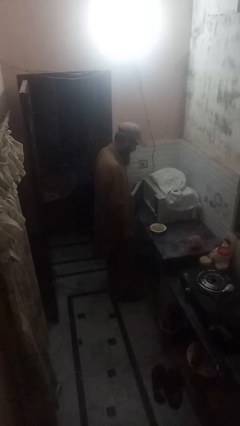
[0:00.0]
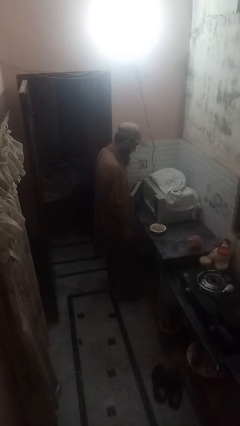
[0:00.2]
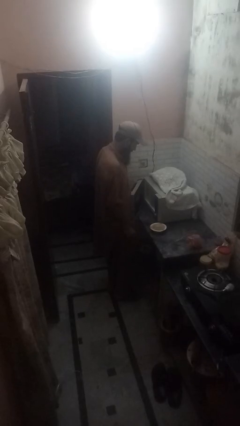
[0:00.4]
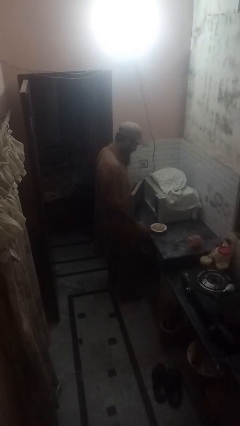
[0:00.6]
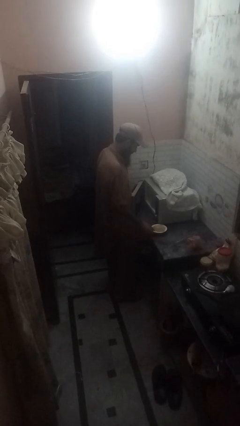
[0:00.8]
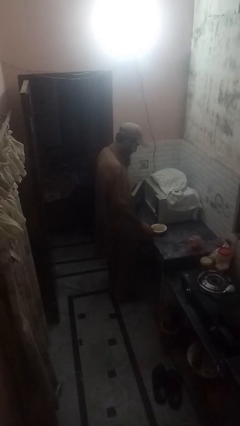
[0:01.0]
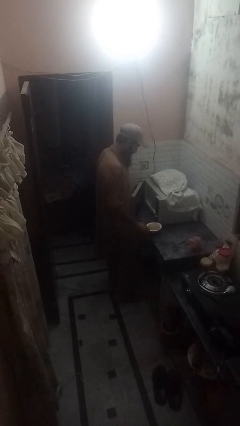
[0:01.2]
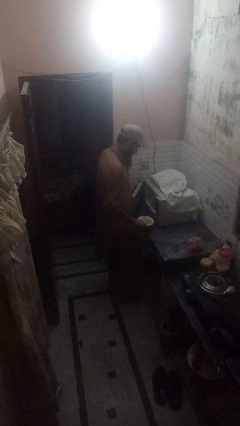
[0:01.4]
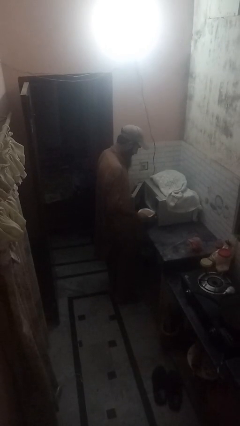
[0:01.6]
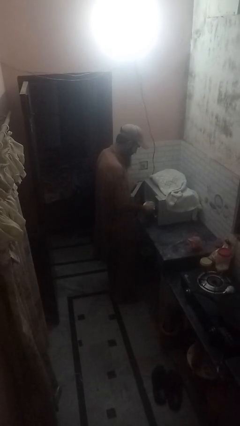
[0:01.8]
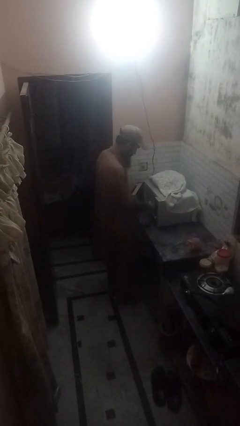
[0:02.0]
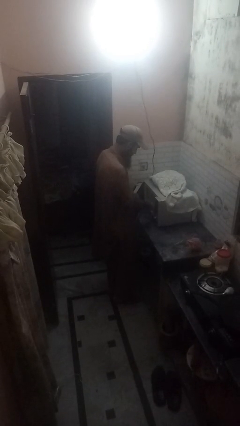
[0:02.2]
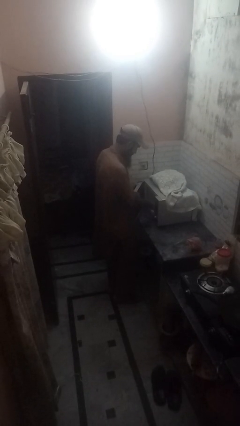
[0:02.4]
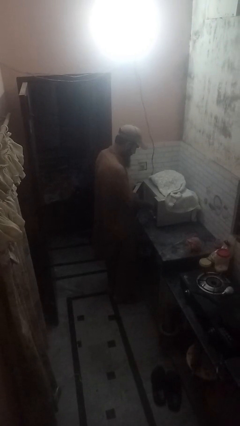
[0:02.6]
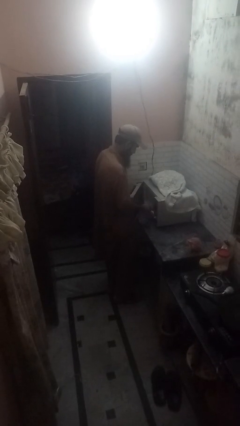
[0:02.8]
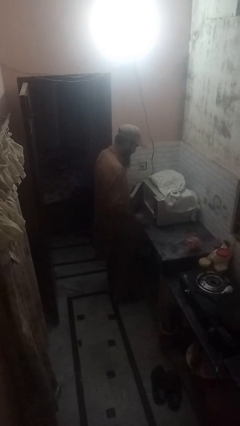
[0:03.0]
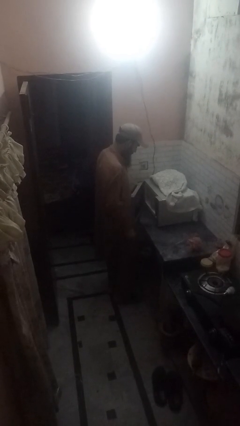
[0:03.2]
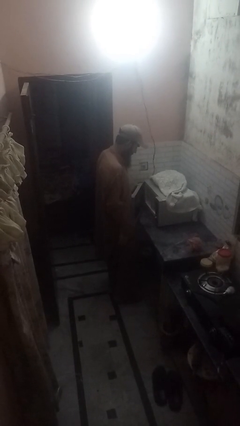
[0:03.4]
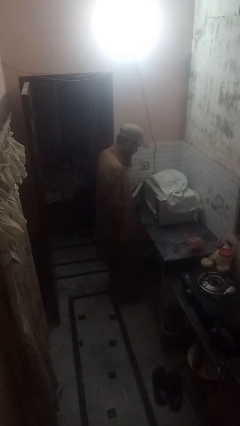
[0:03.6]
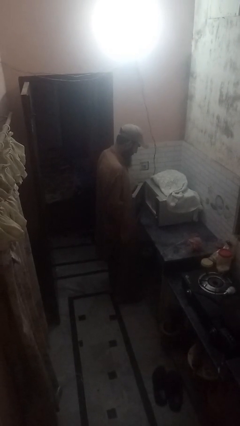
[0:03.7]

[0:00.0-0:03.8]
person puts object into microwave

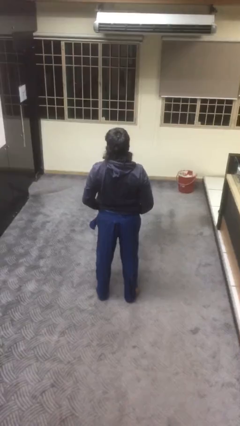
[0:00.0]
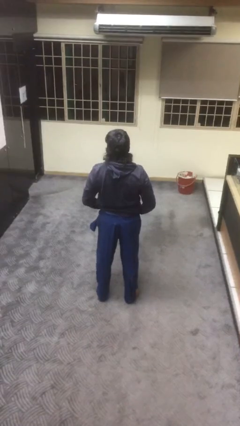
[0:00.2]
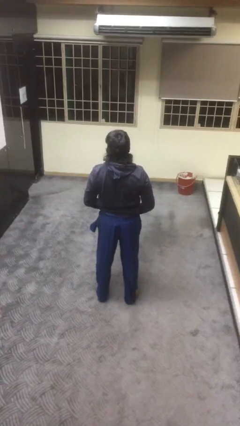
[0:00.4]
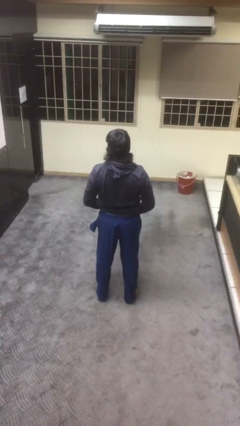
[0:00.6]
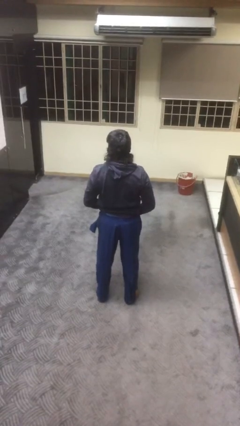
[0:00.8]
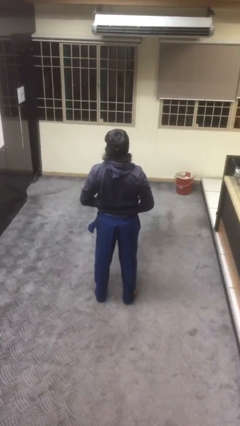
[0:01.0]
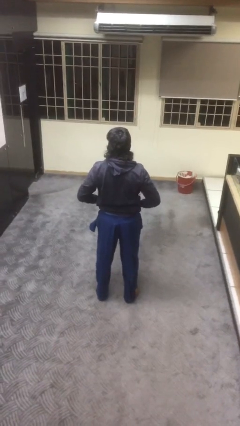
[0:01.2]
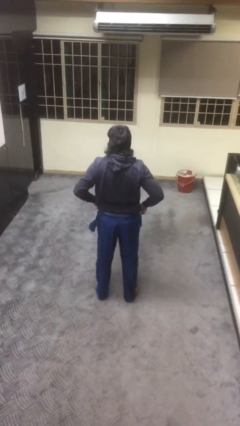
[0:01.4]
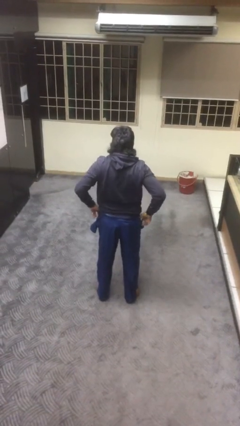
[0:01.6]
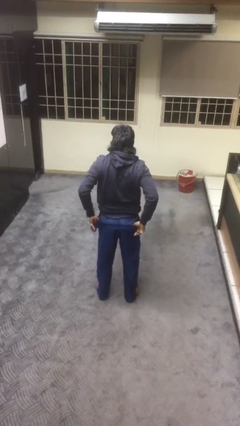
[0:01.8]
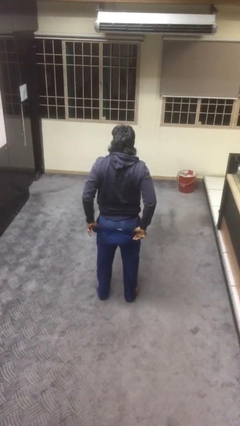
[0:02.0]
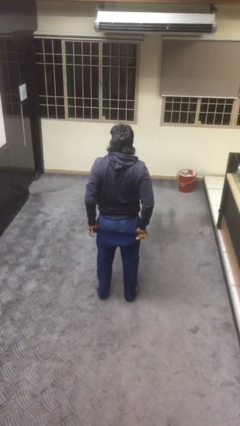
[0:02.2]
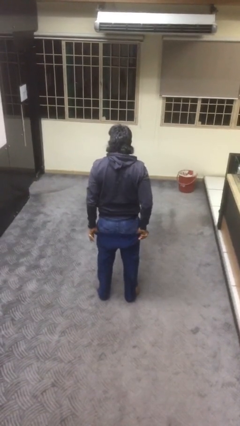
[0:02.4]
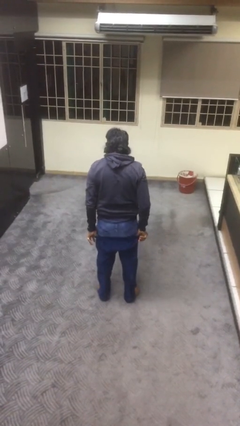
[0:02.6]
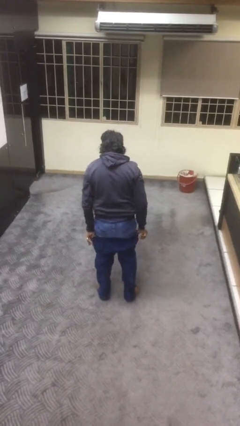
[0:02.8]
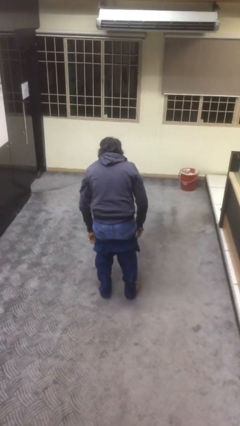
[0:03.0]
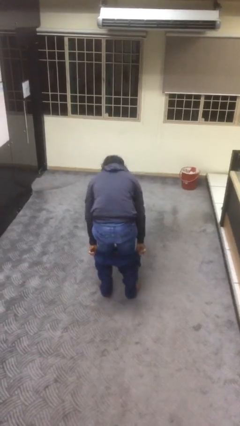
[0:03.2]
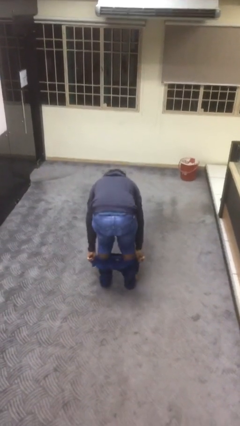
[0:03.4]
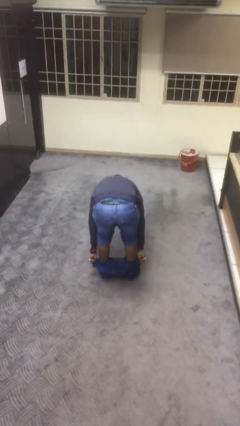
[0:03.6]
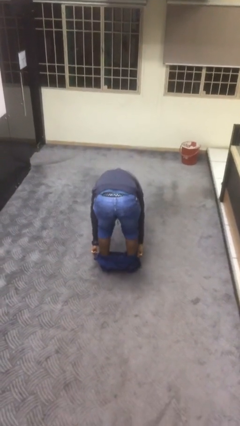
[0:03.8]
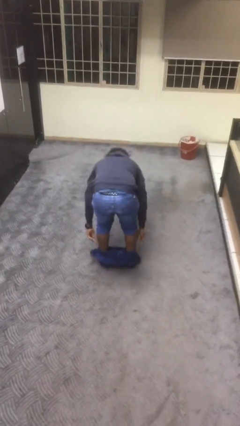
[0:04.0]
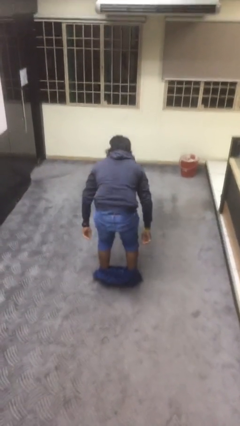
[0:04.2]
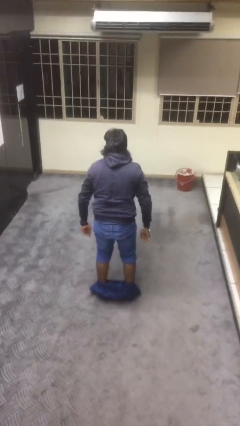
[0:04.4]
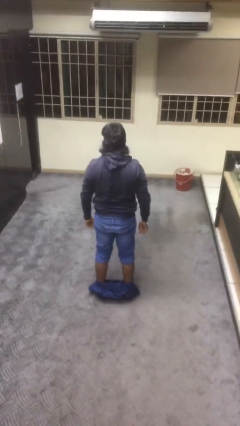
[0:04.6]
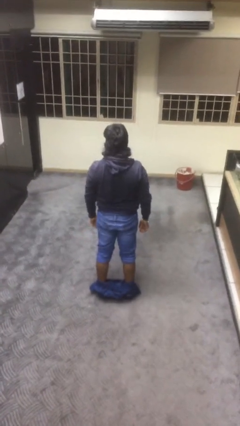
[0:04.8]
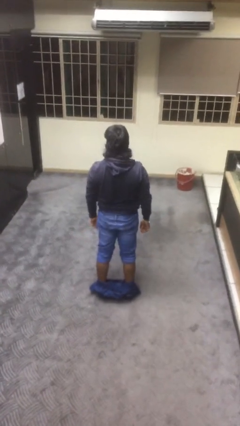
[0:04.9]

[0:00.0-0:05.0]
person takes off pants

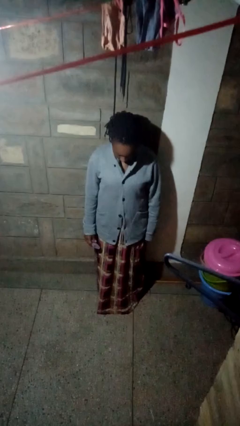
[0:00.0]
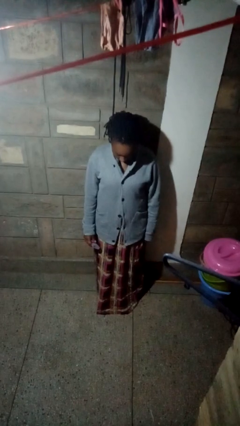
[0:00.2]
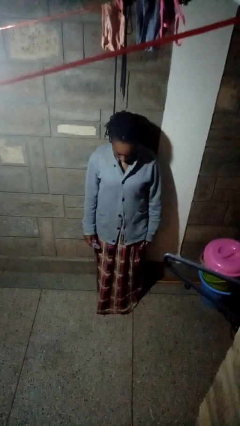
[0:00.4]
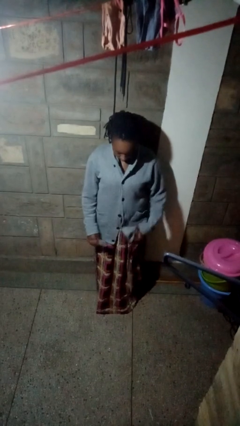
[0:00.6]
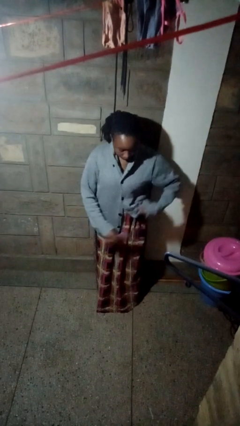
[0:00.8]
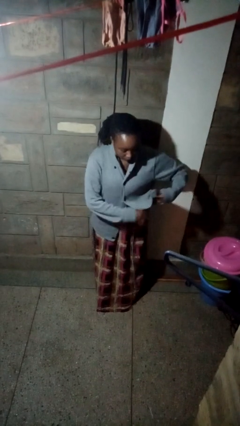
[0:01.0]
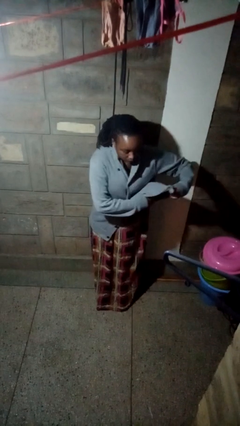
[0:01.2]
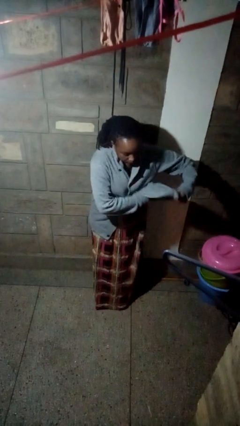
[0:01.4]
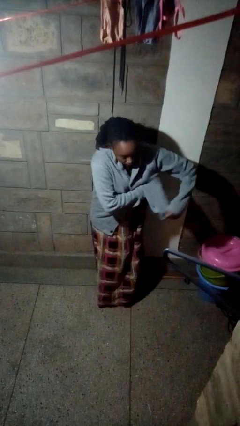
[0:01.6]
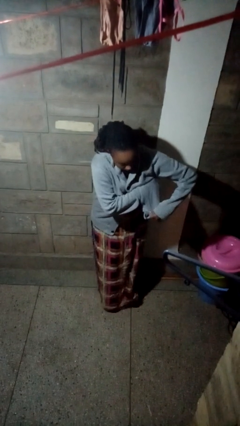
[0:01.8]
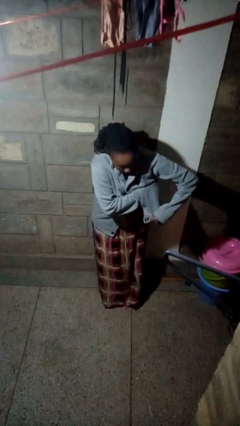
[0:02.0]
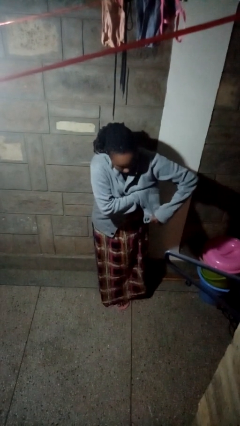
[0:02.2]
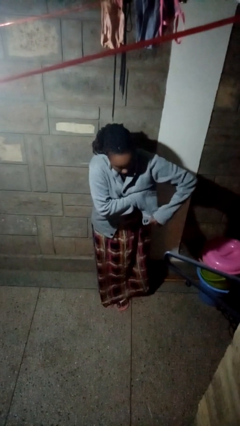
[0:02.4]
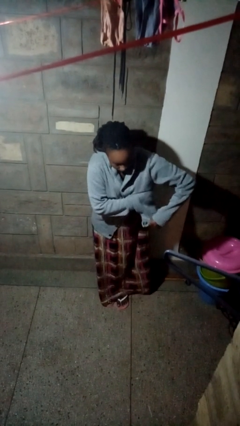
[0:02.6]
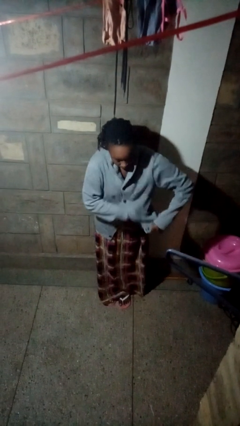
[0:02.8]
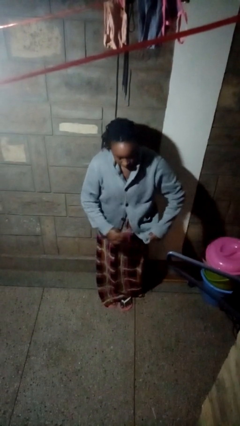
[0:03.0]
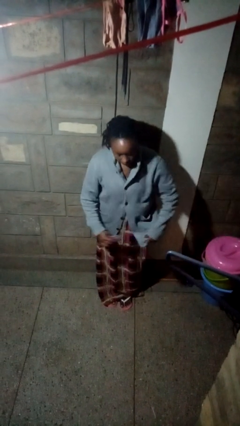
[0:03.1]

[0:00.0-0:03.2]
person applies deodorant

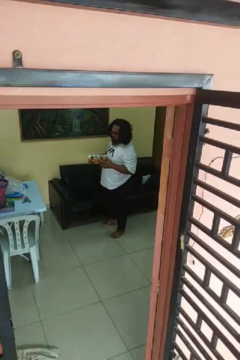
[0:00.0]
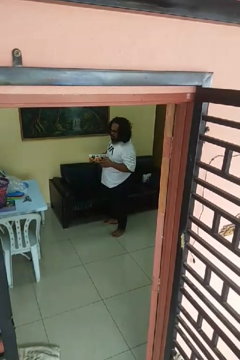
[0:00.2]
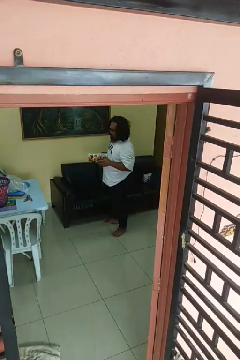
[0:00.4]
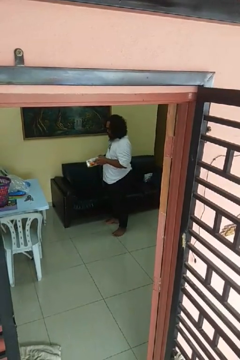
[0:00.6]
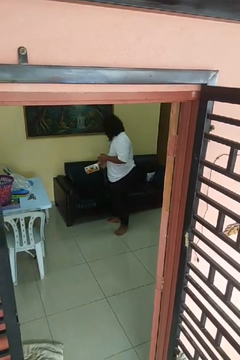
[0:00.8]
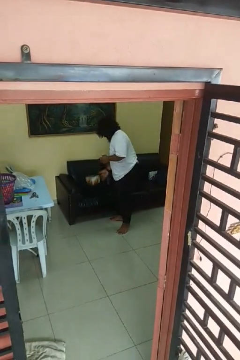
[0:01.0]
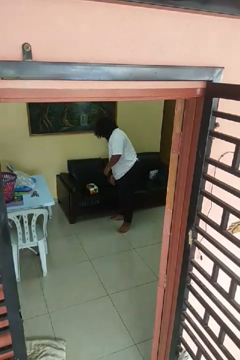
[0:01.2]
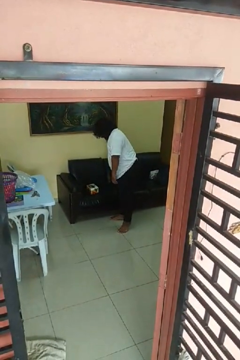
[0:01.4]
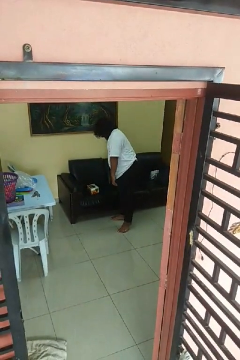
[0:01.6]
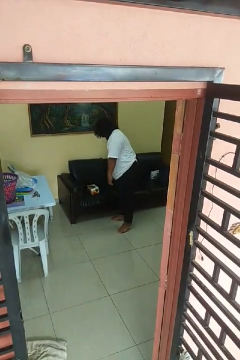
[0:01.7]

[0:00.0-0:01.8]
person puts down object on couch

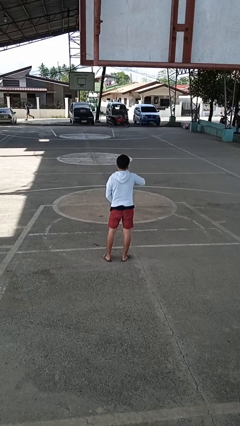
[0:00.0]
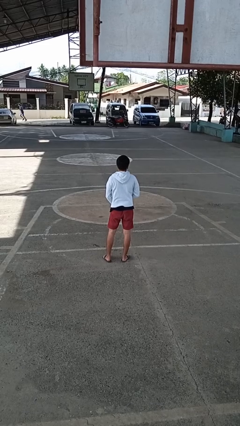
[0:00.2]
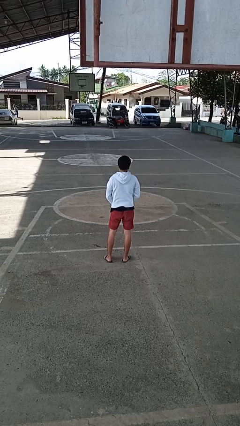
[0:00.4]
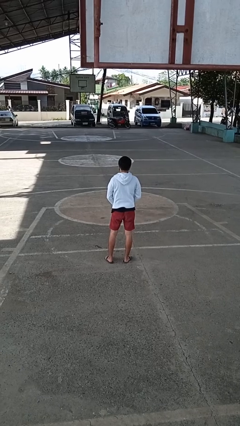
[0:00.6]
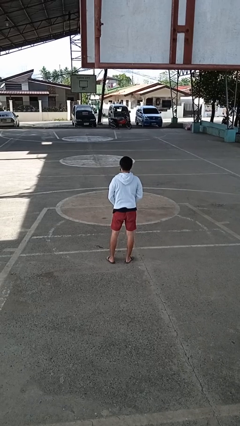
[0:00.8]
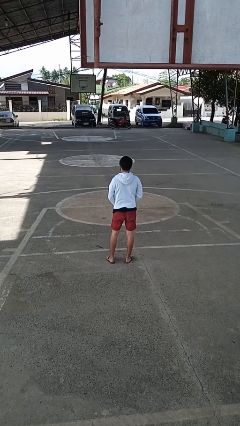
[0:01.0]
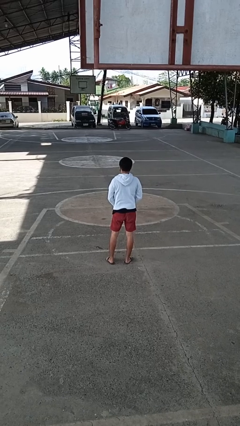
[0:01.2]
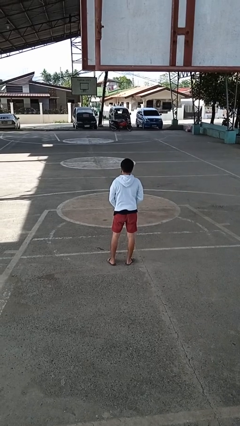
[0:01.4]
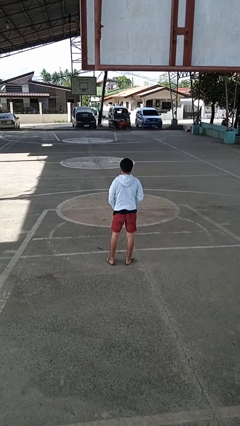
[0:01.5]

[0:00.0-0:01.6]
person unzips jacket

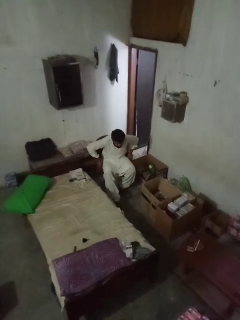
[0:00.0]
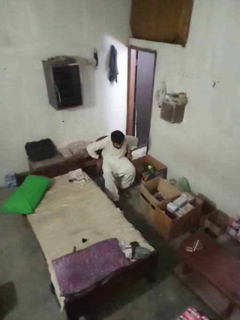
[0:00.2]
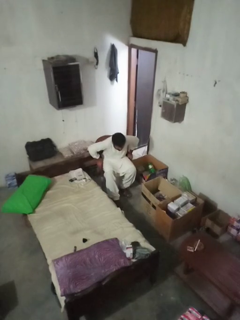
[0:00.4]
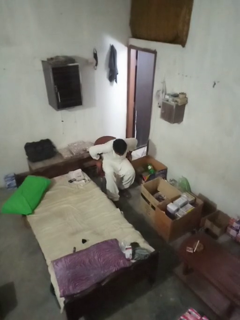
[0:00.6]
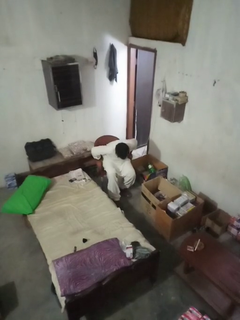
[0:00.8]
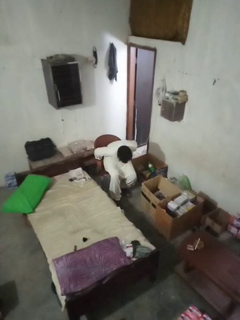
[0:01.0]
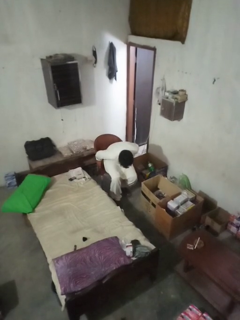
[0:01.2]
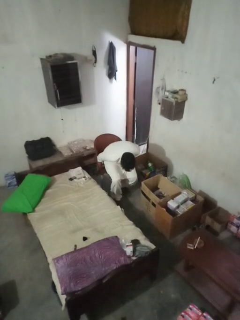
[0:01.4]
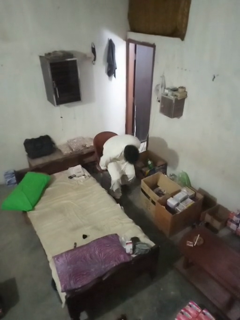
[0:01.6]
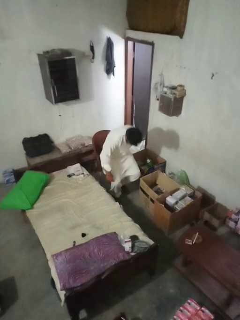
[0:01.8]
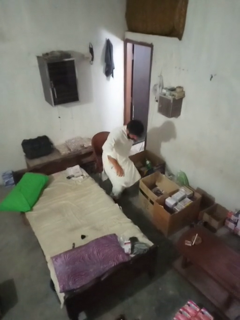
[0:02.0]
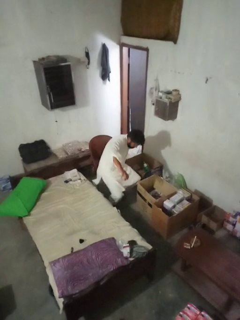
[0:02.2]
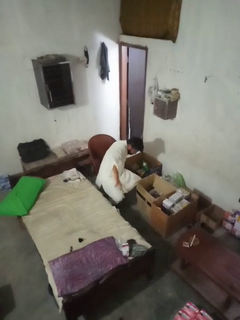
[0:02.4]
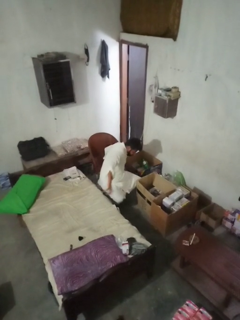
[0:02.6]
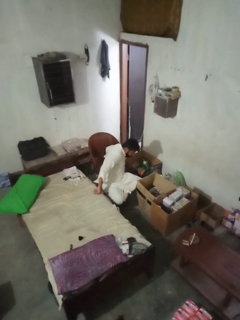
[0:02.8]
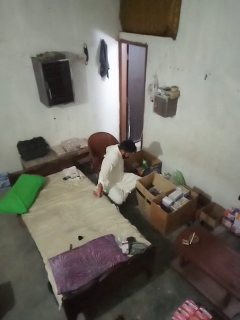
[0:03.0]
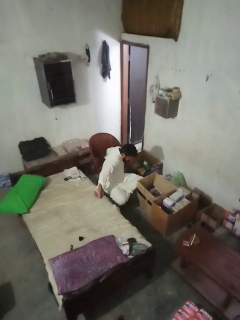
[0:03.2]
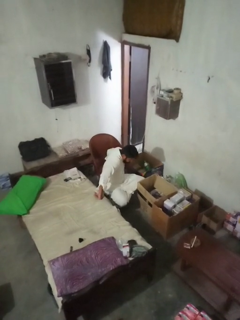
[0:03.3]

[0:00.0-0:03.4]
person falls from chair

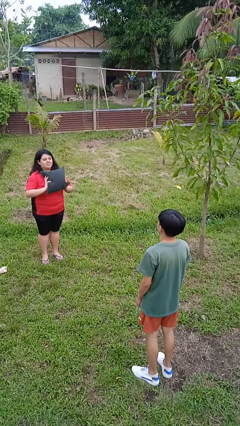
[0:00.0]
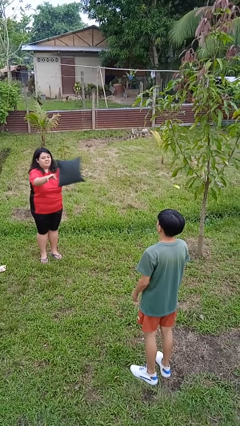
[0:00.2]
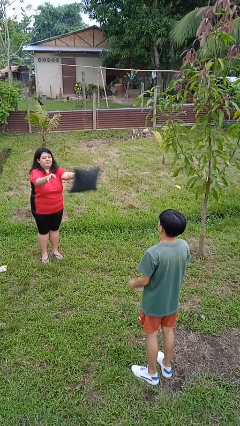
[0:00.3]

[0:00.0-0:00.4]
person throws object to person
